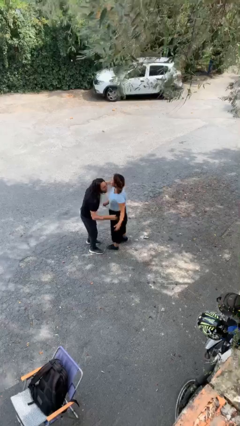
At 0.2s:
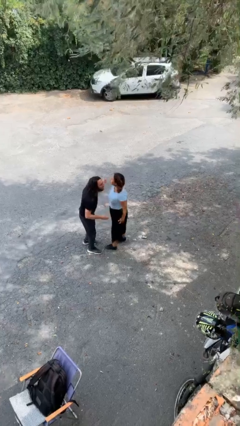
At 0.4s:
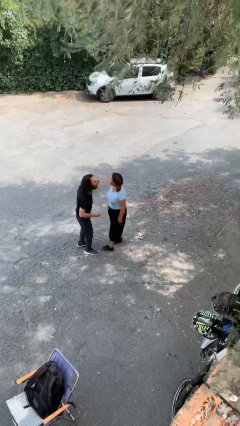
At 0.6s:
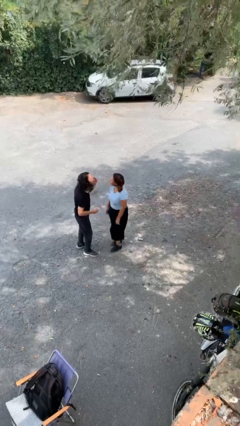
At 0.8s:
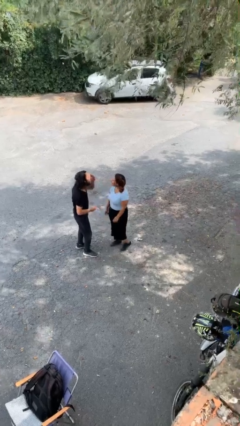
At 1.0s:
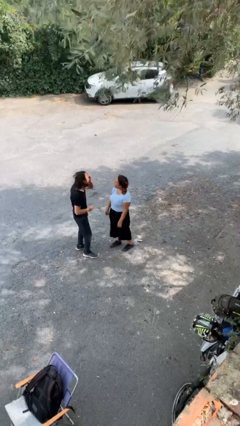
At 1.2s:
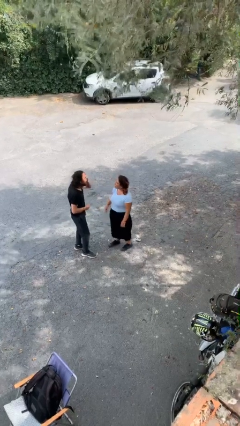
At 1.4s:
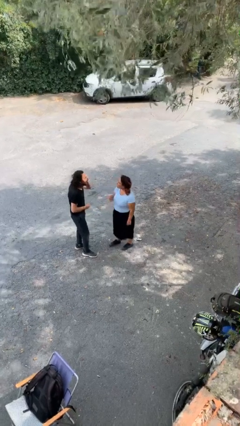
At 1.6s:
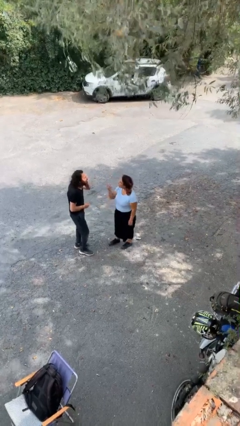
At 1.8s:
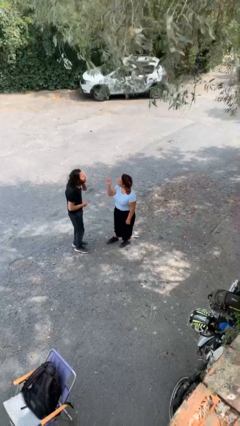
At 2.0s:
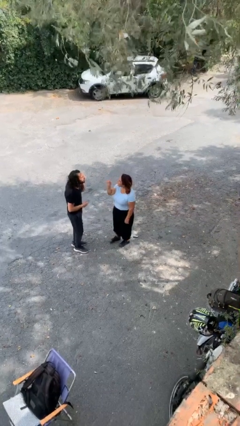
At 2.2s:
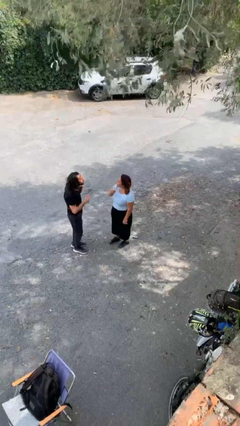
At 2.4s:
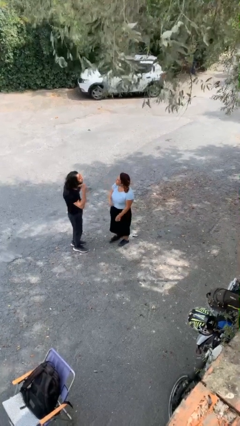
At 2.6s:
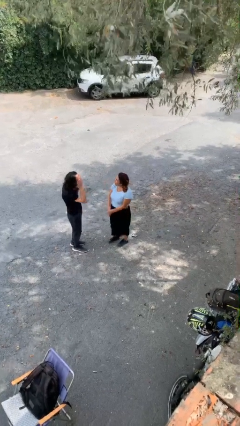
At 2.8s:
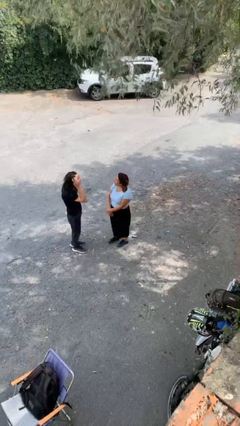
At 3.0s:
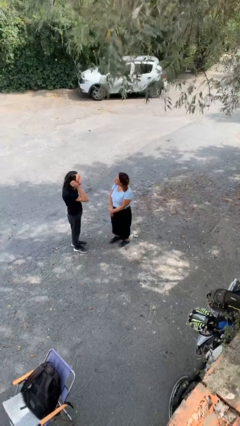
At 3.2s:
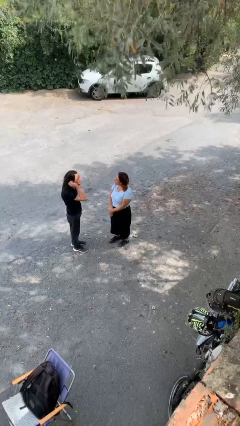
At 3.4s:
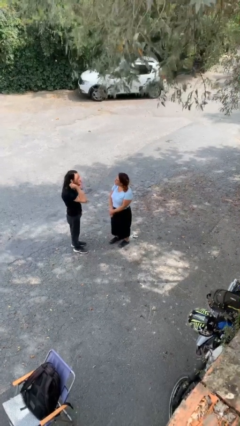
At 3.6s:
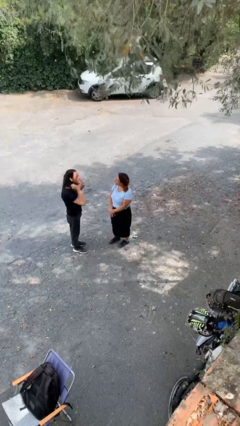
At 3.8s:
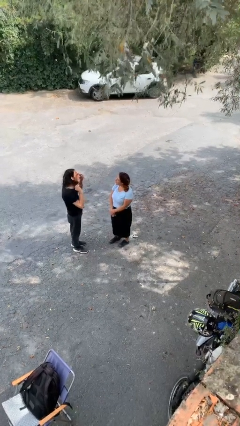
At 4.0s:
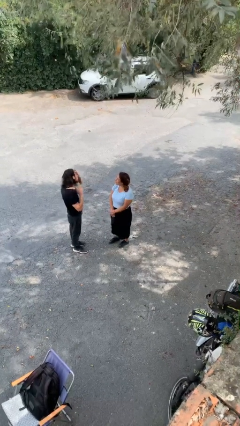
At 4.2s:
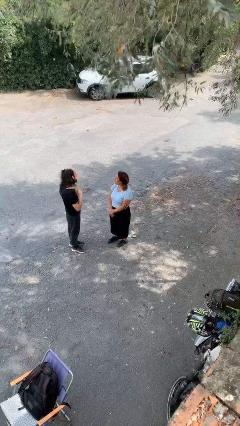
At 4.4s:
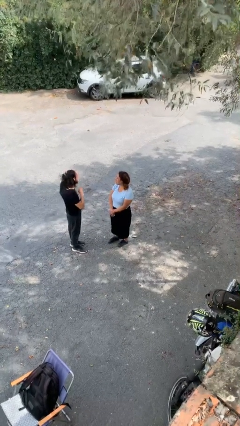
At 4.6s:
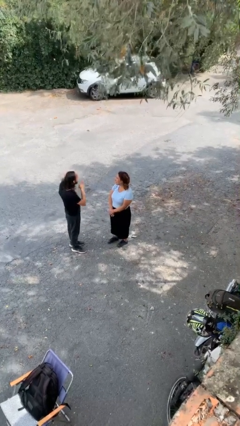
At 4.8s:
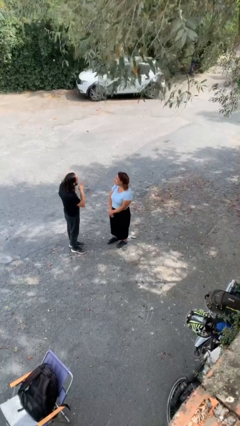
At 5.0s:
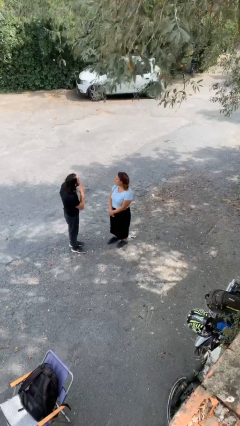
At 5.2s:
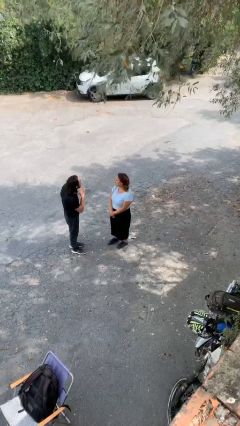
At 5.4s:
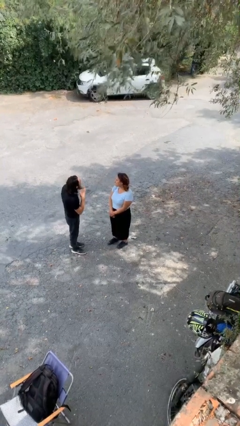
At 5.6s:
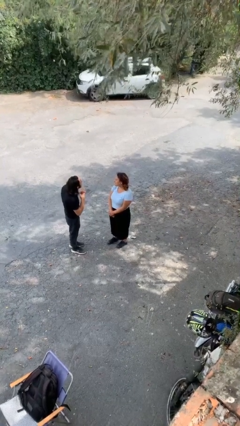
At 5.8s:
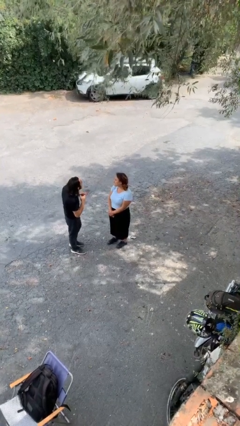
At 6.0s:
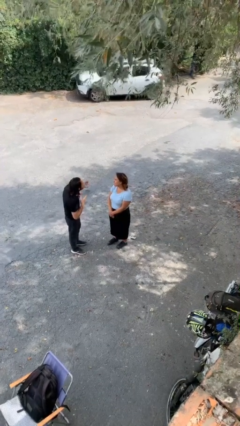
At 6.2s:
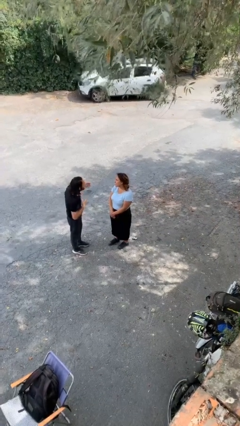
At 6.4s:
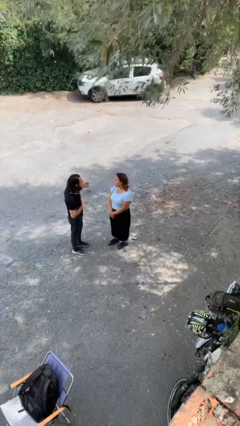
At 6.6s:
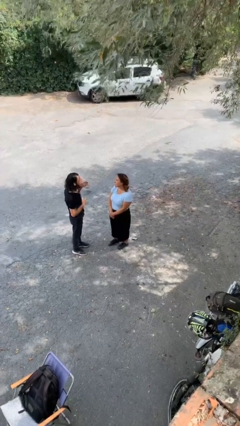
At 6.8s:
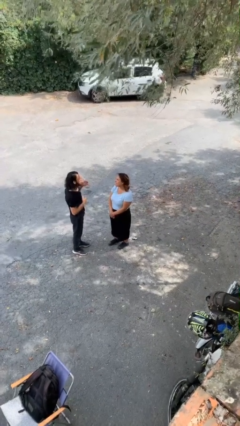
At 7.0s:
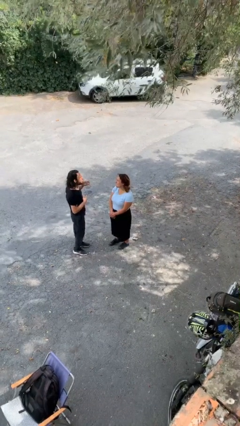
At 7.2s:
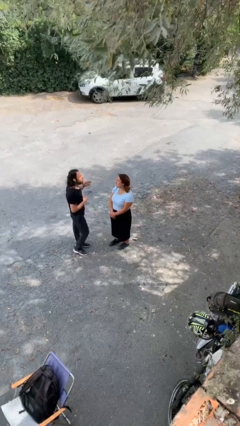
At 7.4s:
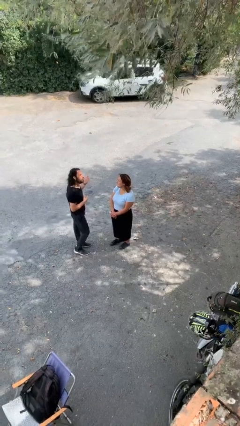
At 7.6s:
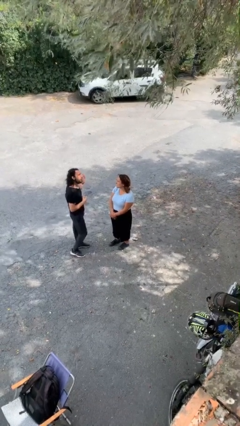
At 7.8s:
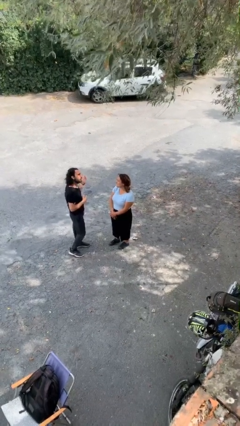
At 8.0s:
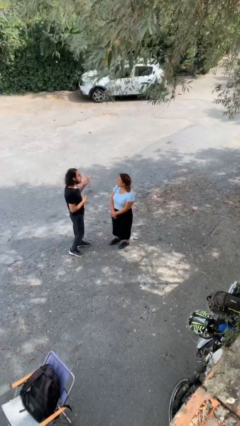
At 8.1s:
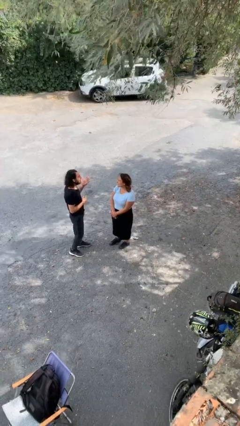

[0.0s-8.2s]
person talks to person

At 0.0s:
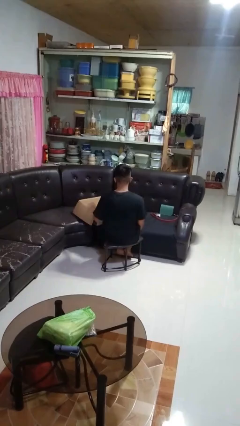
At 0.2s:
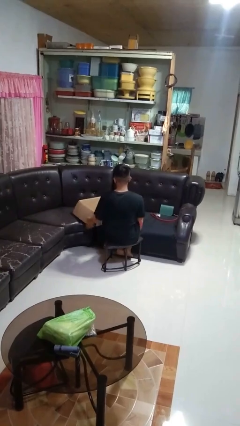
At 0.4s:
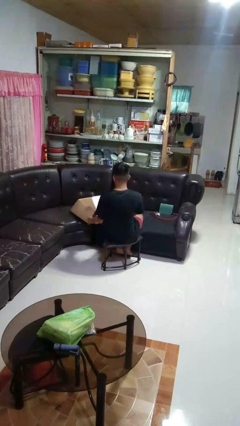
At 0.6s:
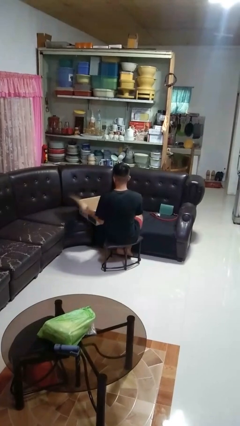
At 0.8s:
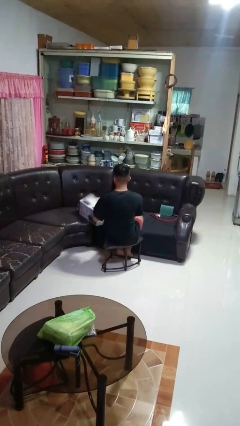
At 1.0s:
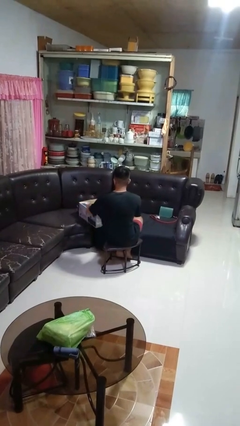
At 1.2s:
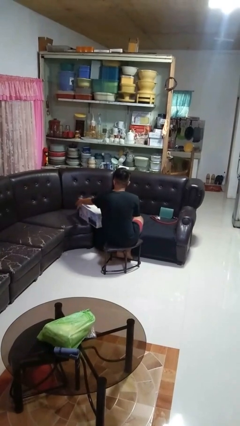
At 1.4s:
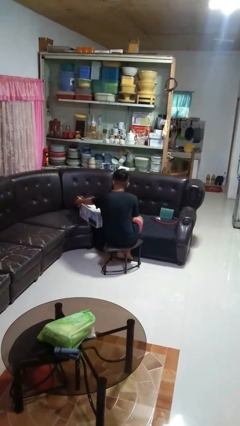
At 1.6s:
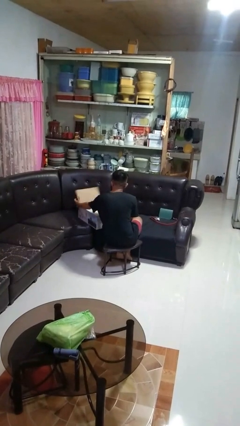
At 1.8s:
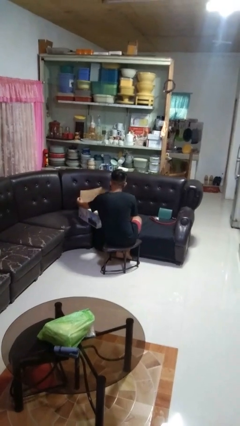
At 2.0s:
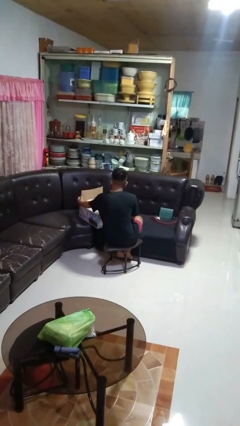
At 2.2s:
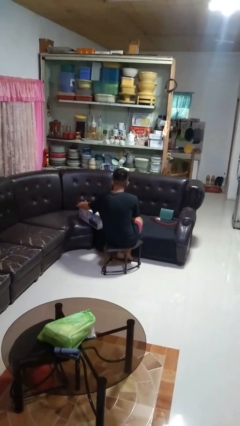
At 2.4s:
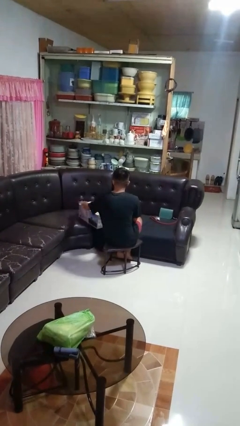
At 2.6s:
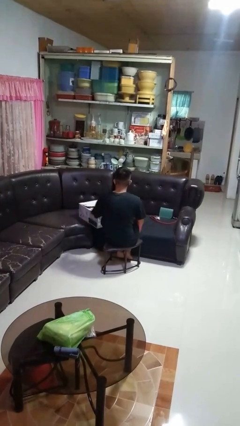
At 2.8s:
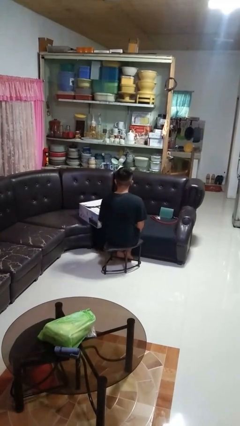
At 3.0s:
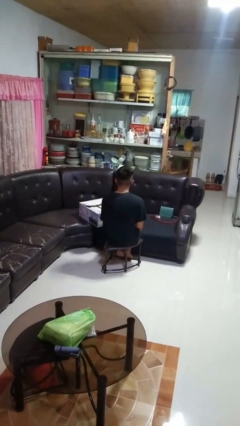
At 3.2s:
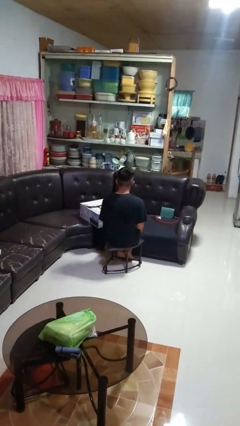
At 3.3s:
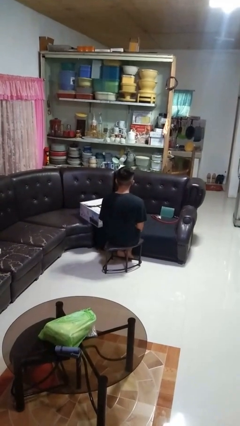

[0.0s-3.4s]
person closes box

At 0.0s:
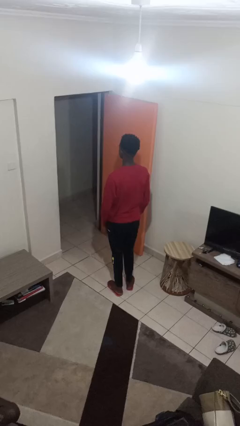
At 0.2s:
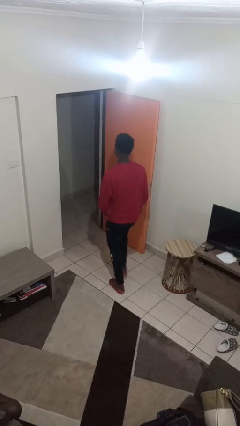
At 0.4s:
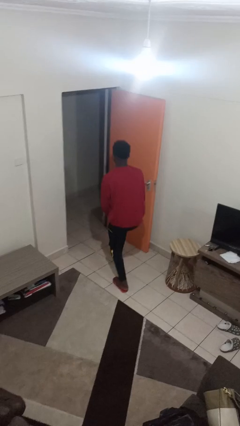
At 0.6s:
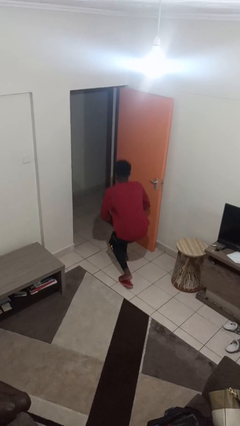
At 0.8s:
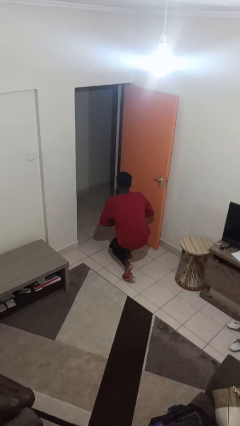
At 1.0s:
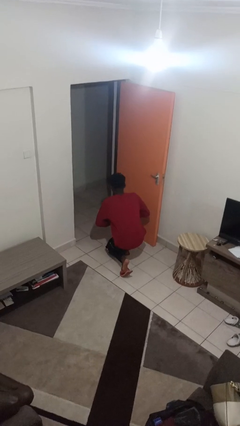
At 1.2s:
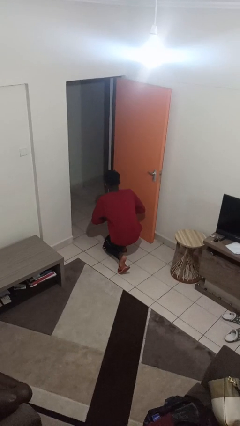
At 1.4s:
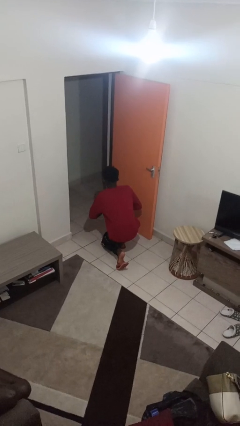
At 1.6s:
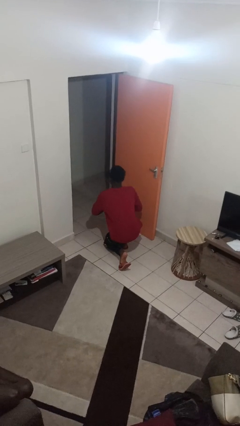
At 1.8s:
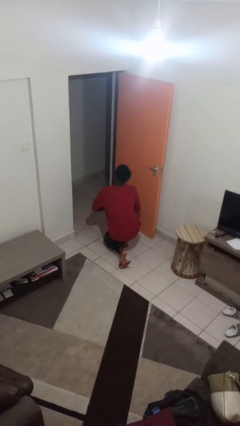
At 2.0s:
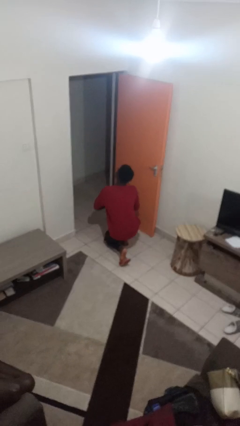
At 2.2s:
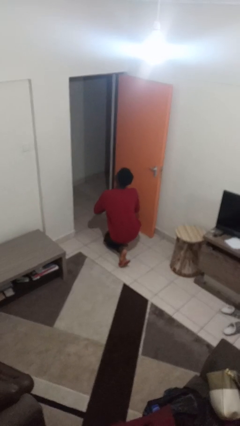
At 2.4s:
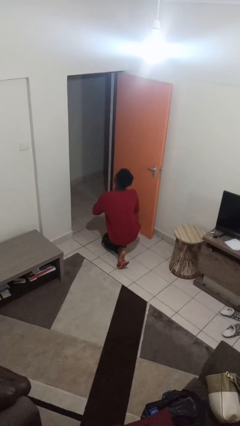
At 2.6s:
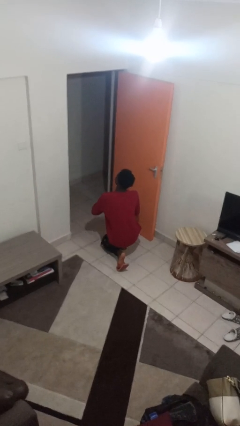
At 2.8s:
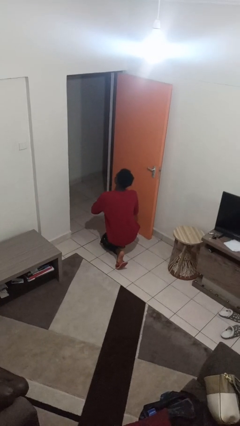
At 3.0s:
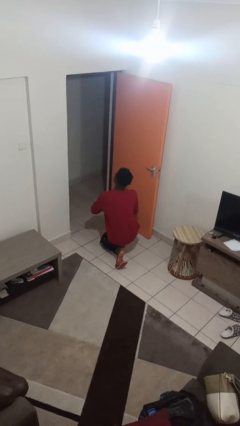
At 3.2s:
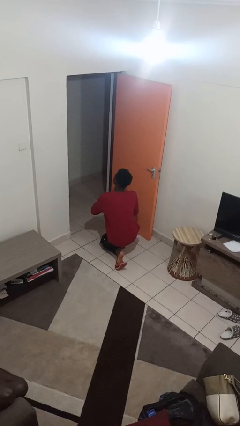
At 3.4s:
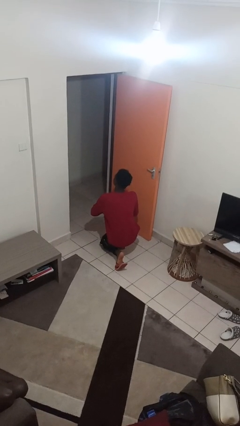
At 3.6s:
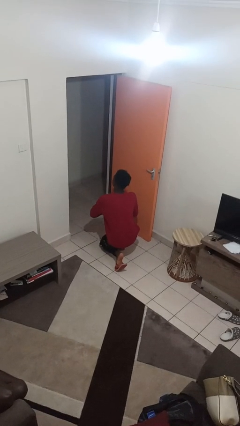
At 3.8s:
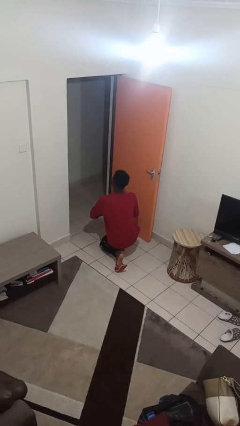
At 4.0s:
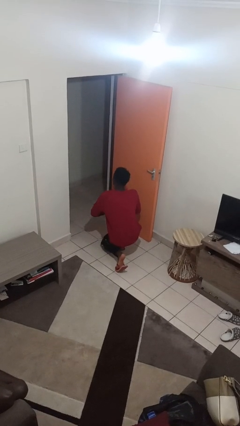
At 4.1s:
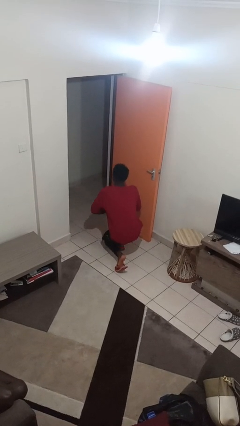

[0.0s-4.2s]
person kneels

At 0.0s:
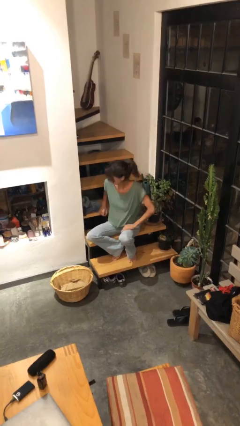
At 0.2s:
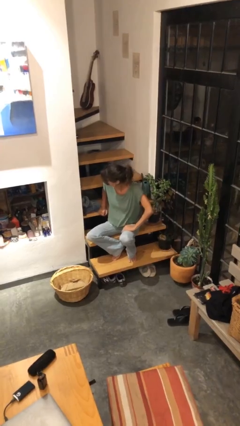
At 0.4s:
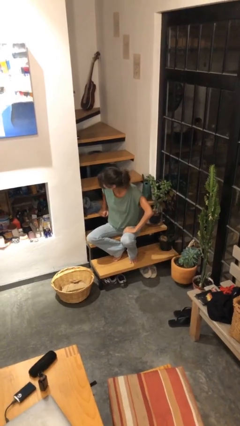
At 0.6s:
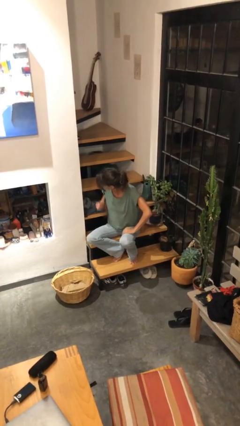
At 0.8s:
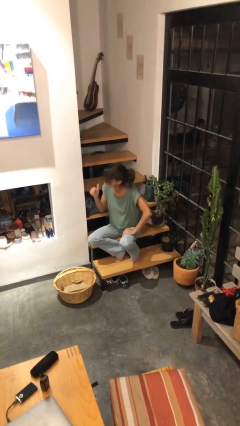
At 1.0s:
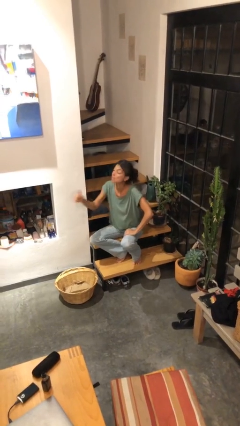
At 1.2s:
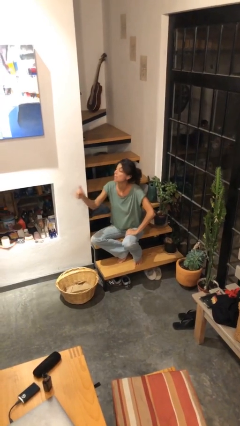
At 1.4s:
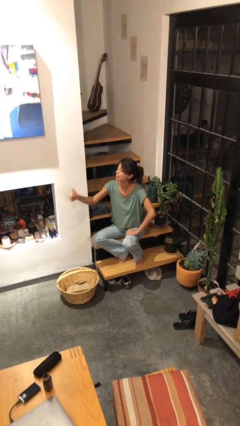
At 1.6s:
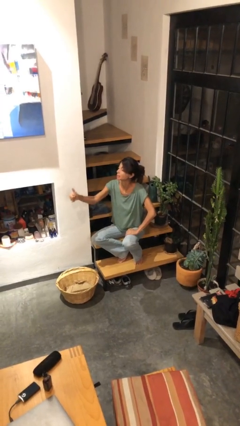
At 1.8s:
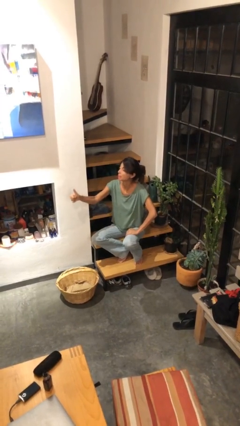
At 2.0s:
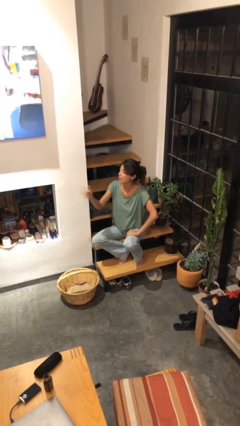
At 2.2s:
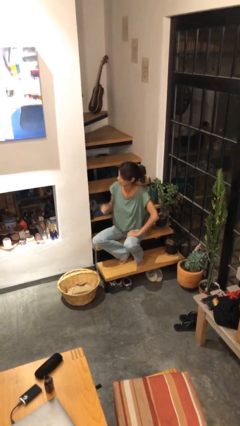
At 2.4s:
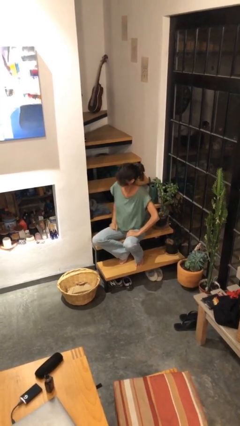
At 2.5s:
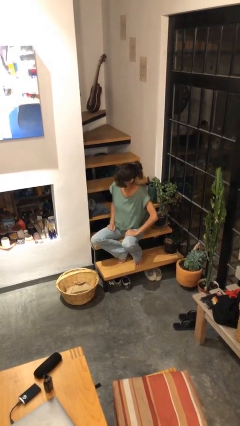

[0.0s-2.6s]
person gestures thumbs up
